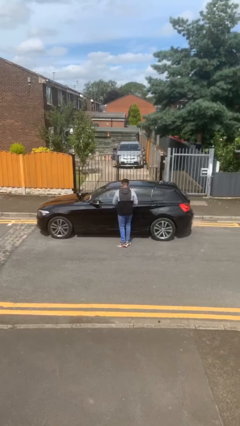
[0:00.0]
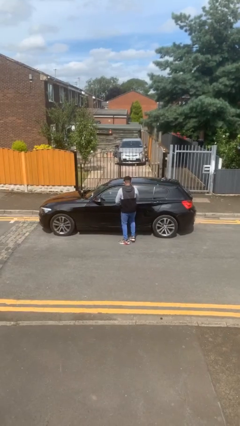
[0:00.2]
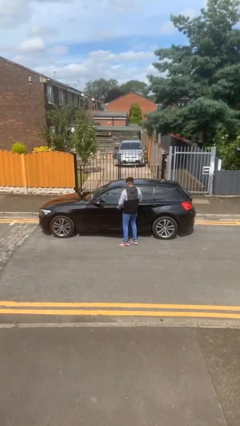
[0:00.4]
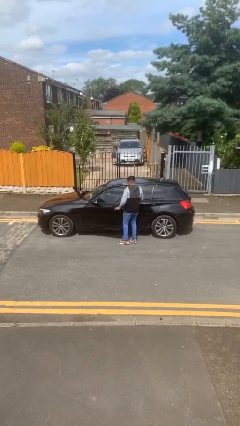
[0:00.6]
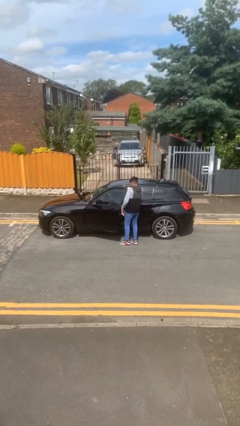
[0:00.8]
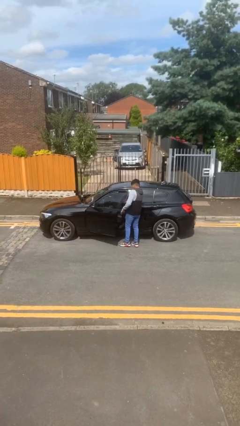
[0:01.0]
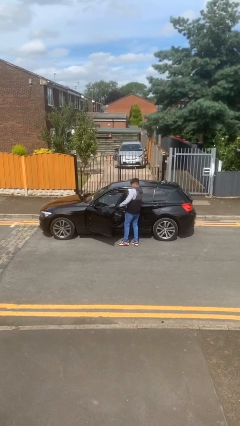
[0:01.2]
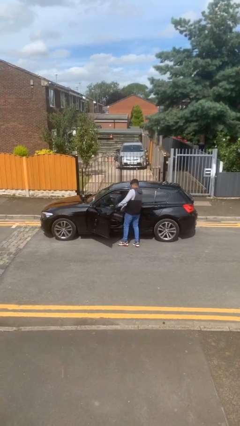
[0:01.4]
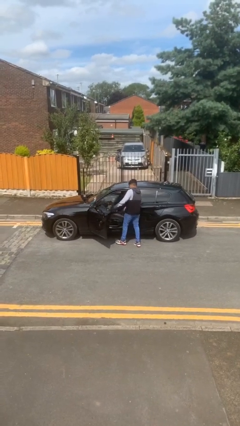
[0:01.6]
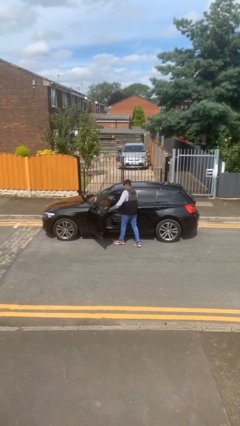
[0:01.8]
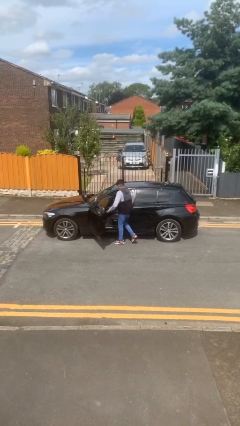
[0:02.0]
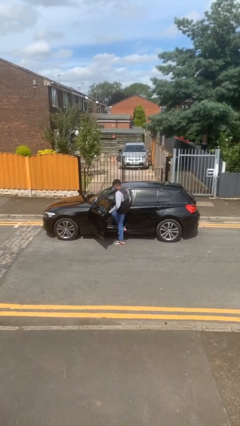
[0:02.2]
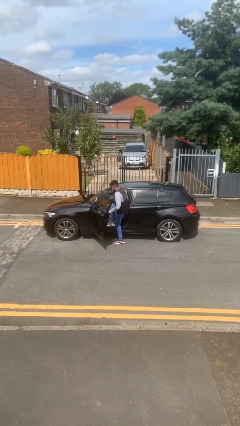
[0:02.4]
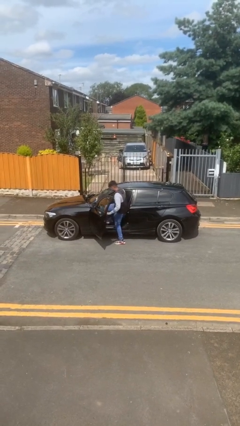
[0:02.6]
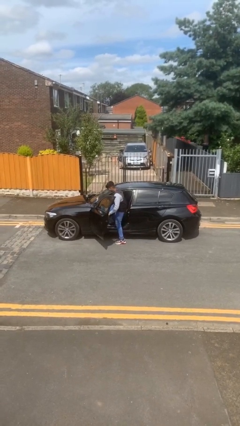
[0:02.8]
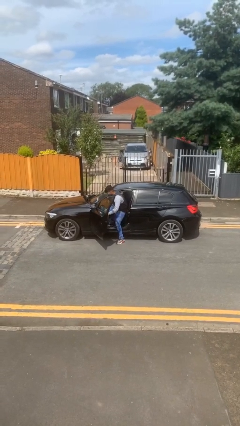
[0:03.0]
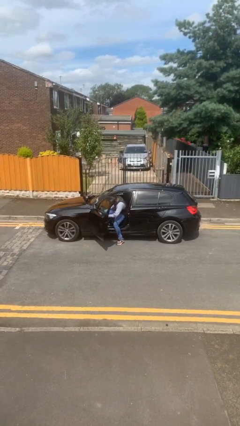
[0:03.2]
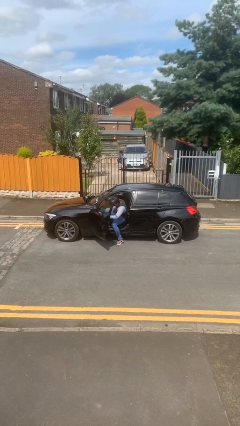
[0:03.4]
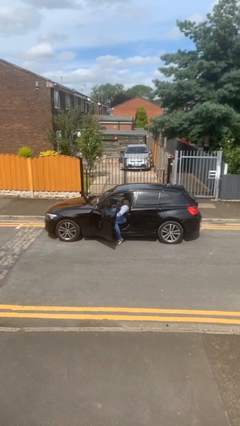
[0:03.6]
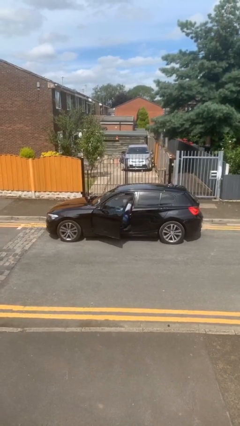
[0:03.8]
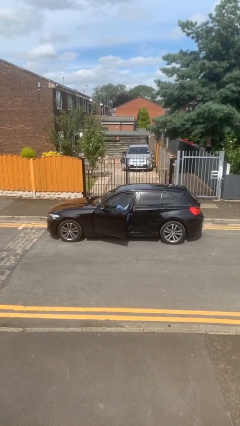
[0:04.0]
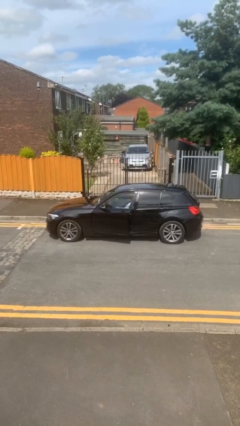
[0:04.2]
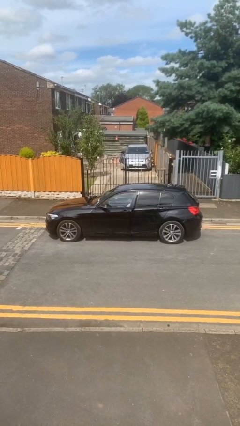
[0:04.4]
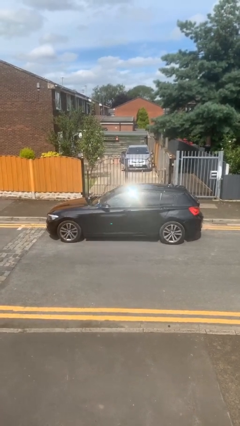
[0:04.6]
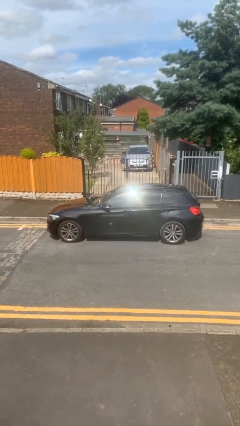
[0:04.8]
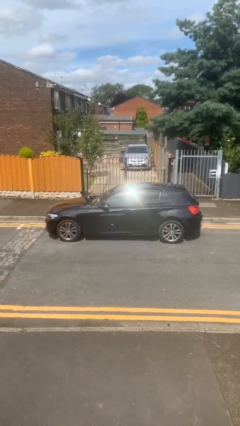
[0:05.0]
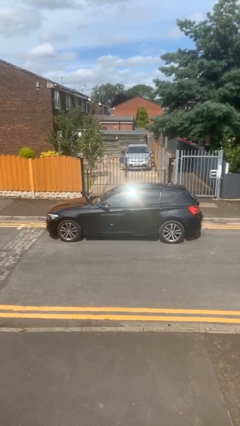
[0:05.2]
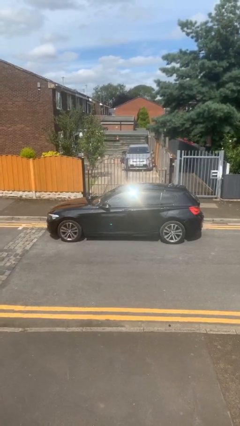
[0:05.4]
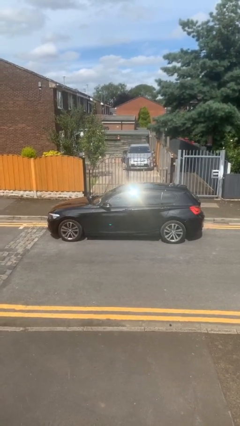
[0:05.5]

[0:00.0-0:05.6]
car picks up person

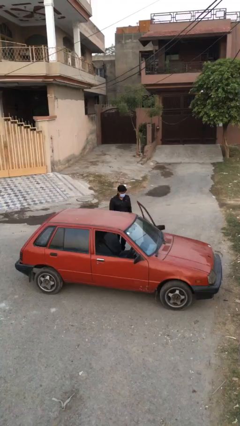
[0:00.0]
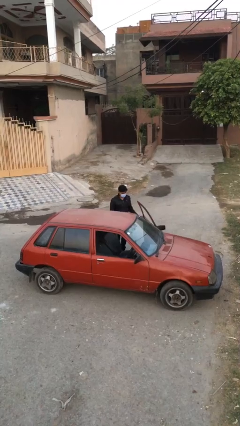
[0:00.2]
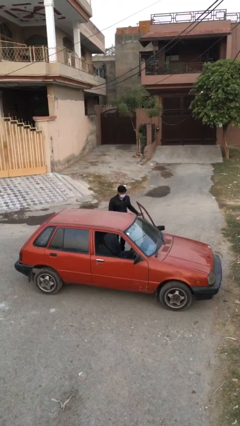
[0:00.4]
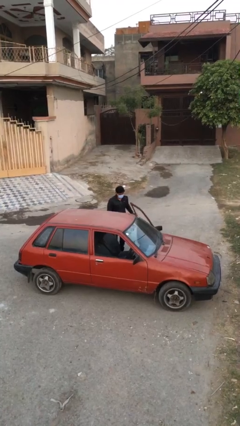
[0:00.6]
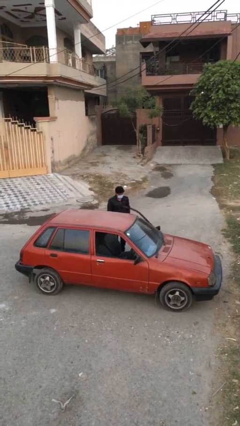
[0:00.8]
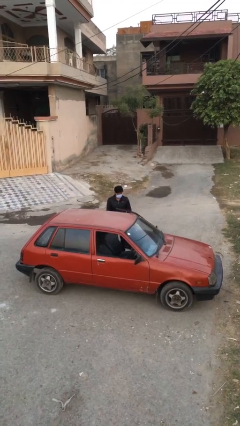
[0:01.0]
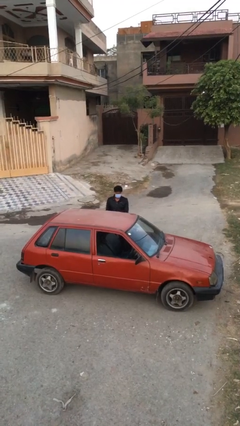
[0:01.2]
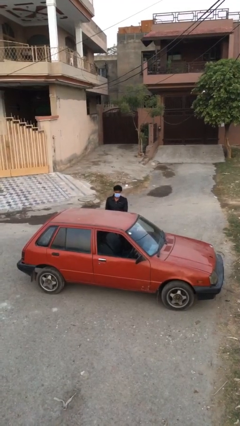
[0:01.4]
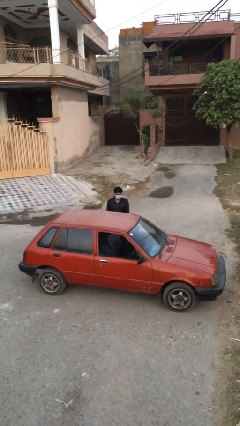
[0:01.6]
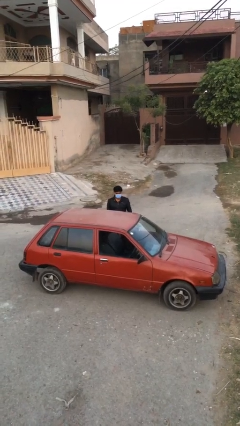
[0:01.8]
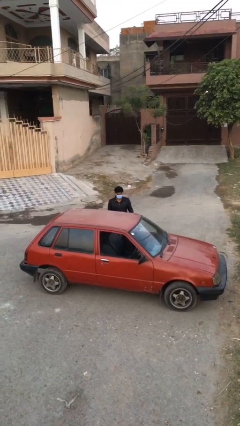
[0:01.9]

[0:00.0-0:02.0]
person closes car door

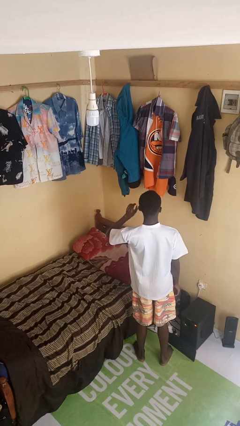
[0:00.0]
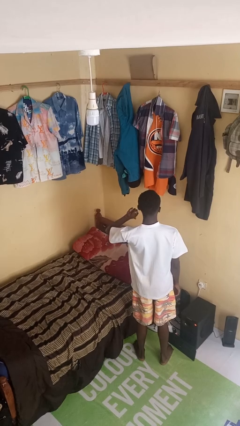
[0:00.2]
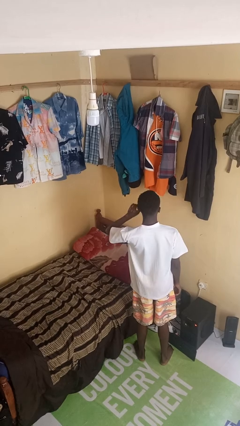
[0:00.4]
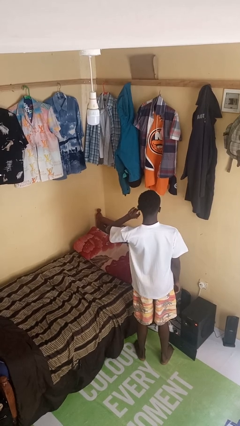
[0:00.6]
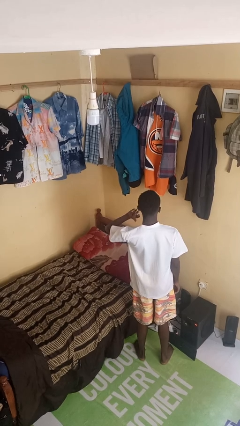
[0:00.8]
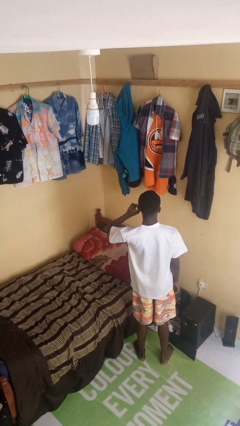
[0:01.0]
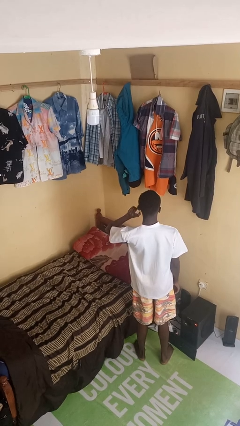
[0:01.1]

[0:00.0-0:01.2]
person gestures listen closely

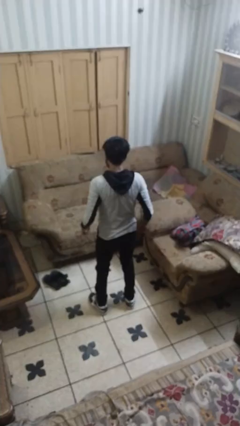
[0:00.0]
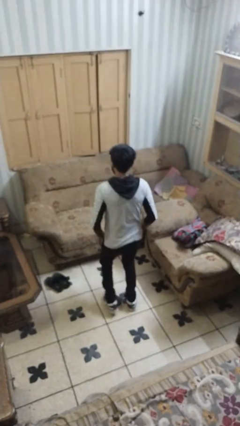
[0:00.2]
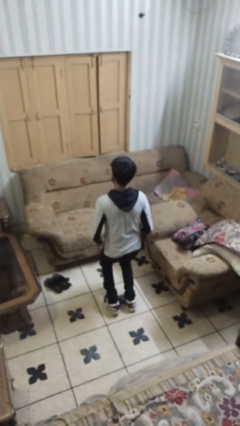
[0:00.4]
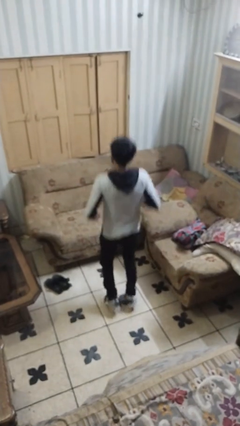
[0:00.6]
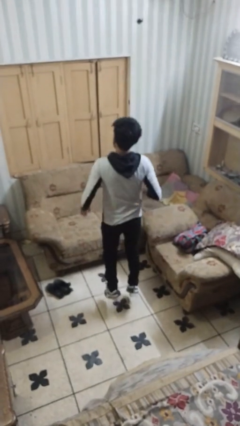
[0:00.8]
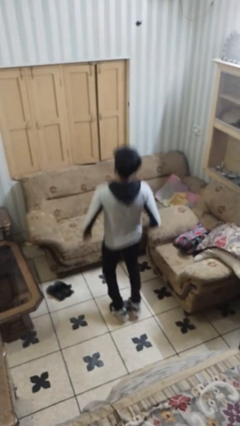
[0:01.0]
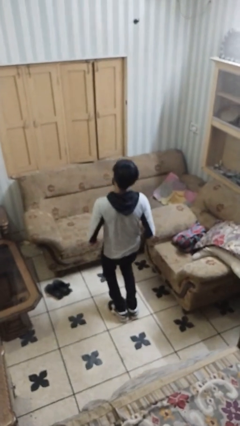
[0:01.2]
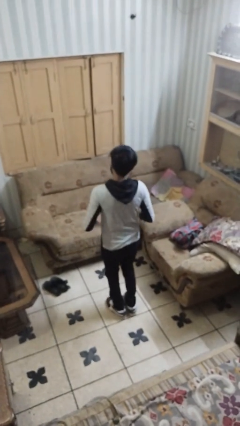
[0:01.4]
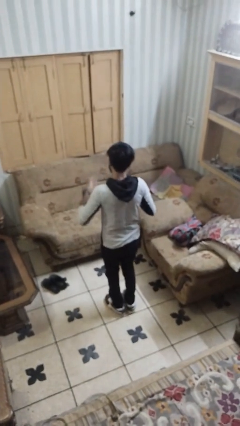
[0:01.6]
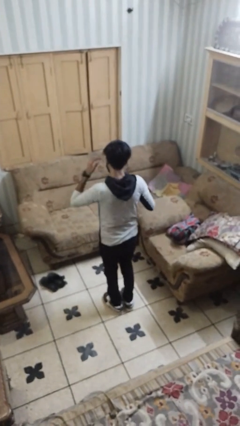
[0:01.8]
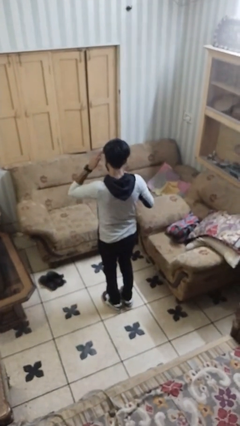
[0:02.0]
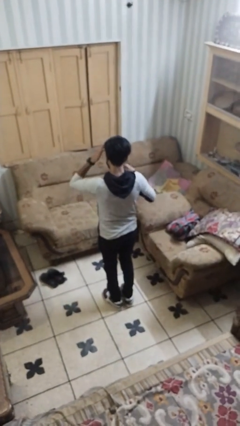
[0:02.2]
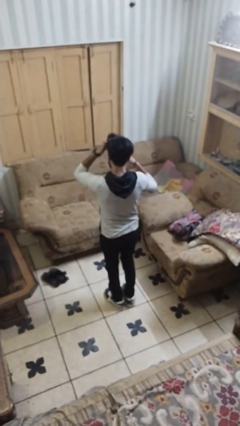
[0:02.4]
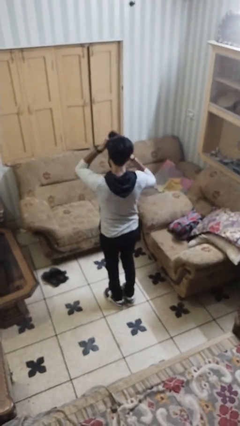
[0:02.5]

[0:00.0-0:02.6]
person jumps

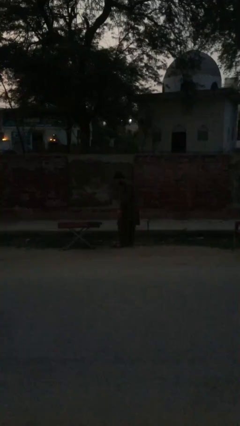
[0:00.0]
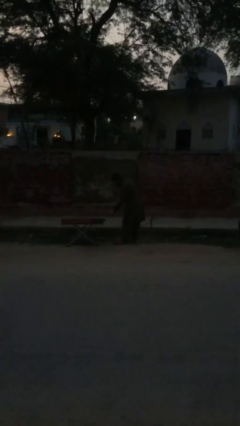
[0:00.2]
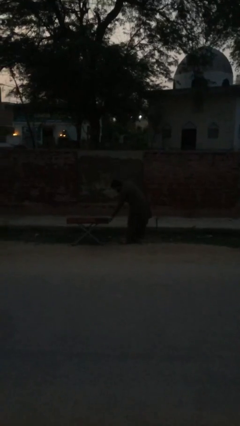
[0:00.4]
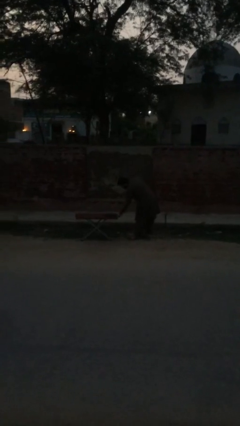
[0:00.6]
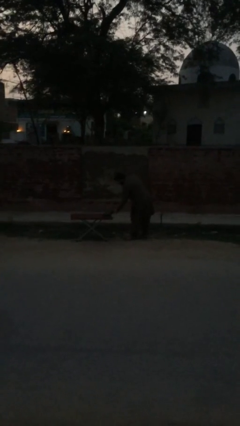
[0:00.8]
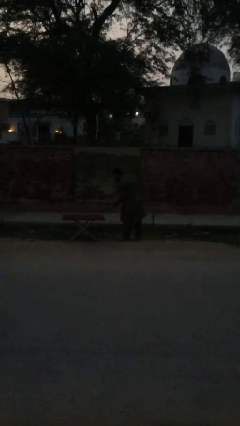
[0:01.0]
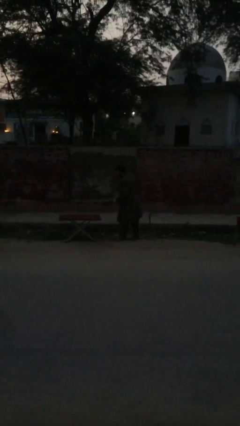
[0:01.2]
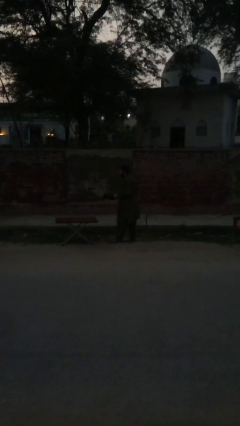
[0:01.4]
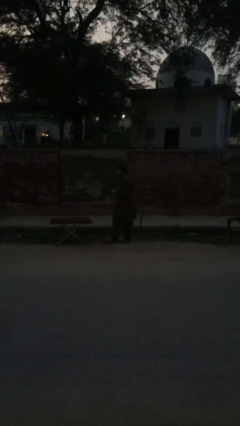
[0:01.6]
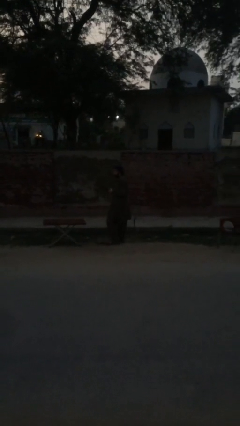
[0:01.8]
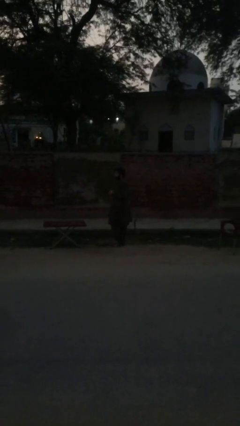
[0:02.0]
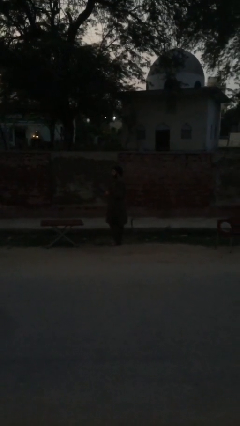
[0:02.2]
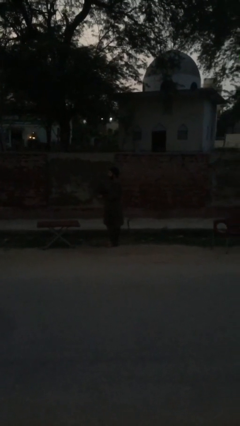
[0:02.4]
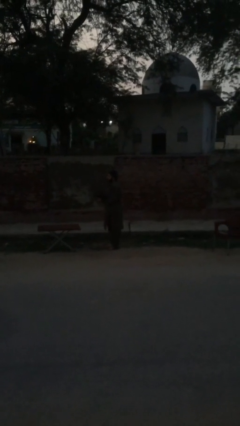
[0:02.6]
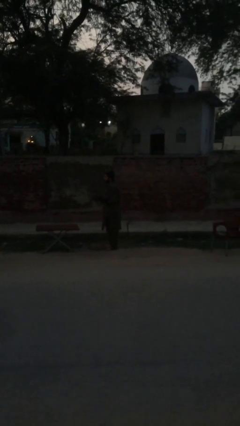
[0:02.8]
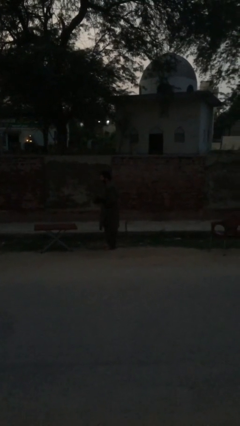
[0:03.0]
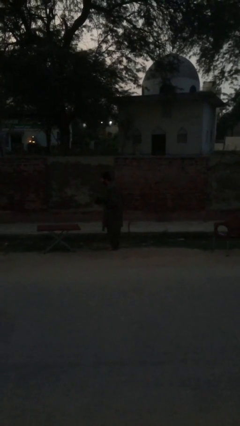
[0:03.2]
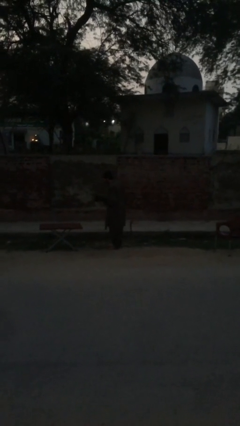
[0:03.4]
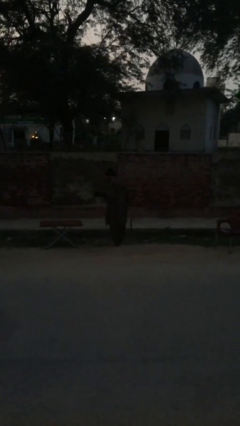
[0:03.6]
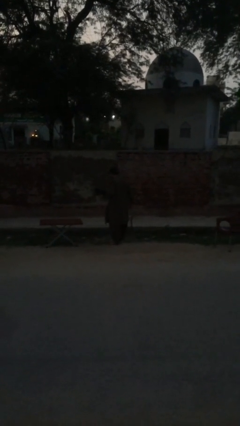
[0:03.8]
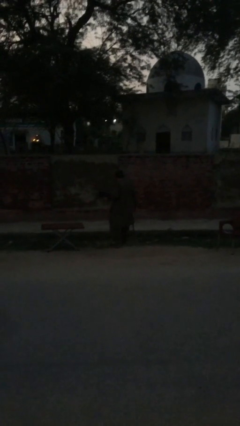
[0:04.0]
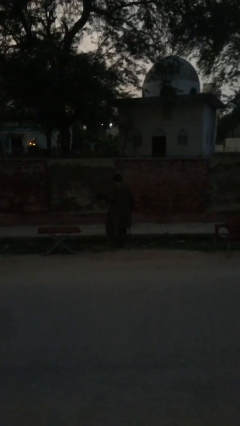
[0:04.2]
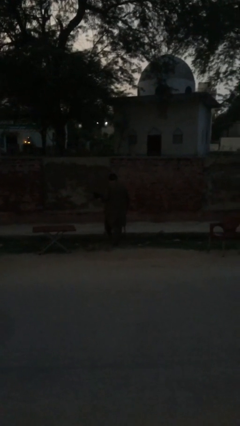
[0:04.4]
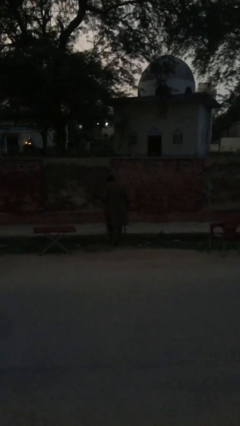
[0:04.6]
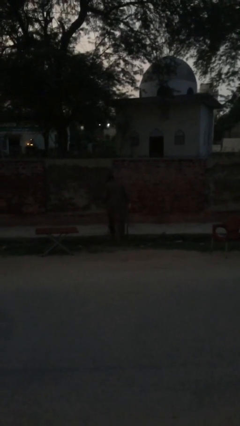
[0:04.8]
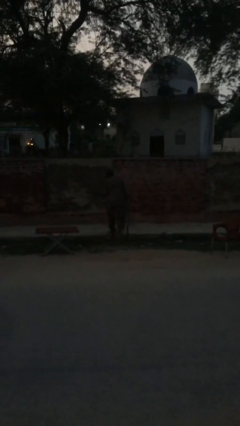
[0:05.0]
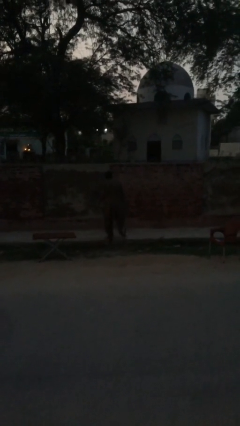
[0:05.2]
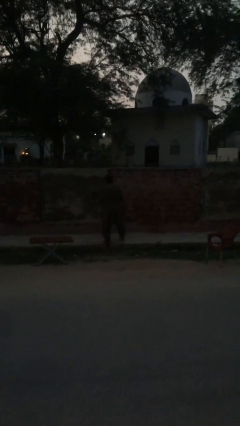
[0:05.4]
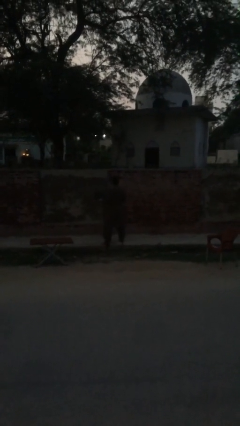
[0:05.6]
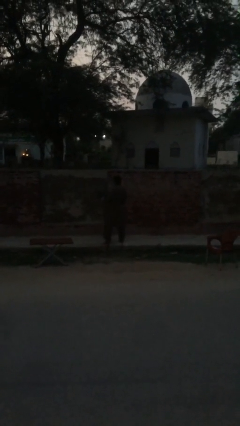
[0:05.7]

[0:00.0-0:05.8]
person picks up object from table
